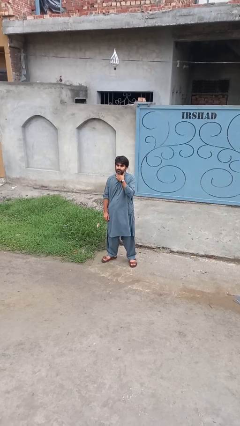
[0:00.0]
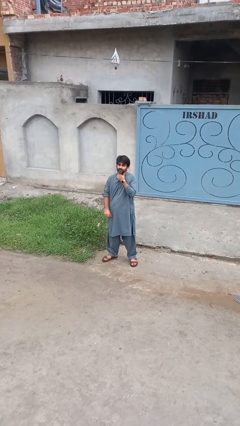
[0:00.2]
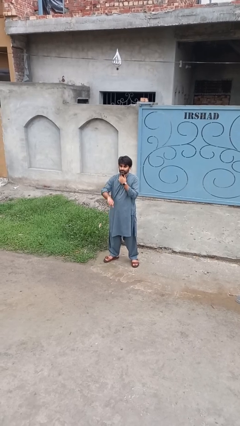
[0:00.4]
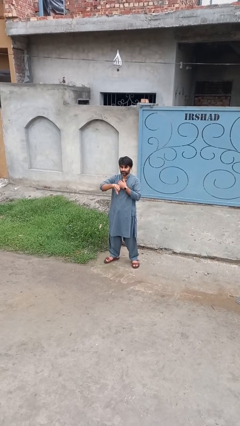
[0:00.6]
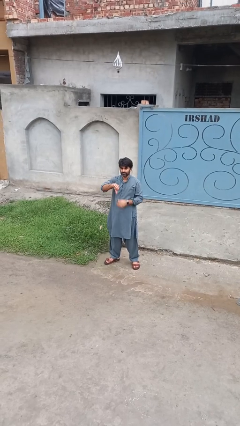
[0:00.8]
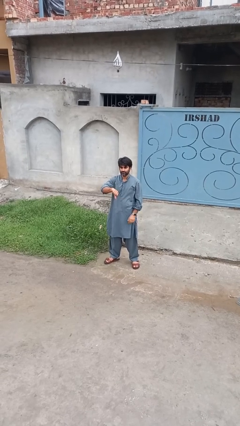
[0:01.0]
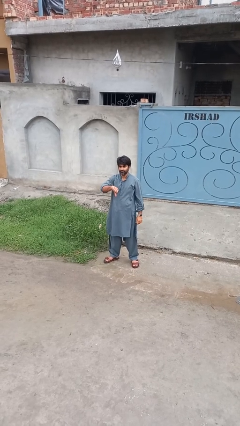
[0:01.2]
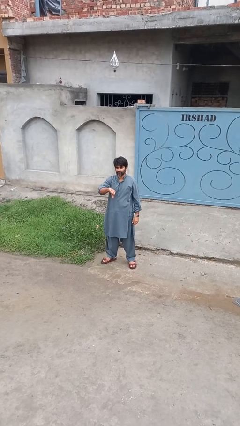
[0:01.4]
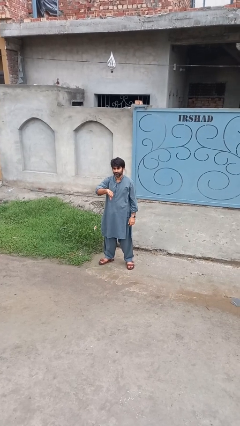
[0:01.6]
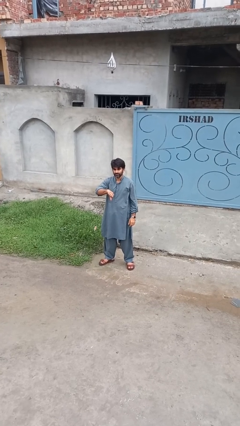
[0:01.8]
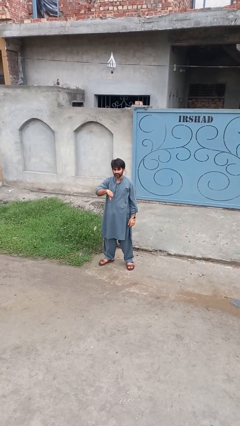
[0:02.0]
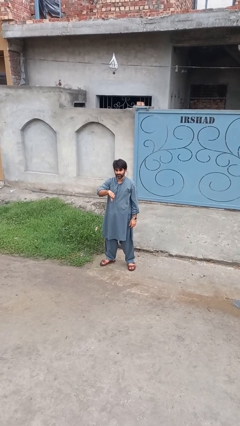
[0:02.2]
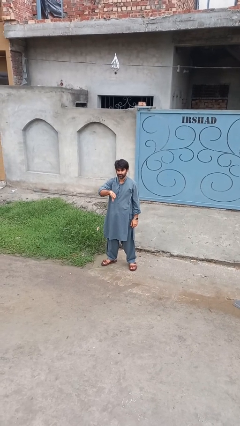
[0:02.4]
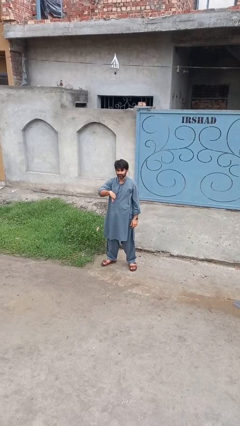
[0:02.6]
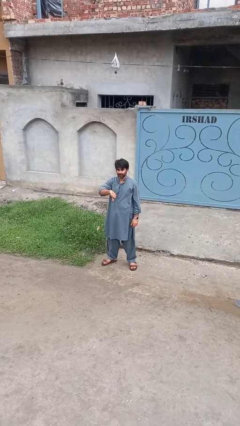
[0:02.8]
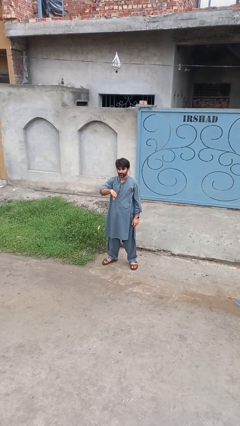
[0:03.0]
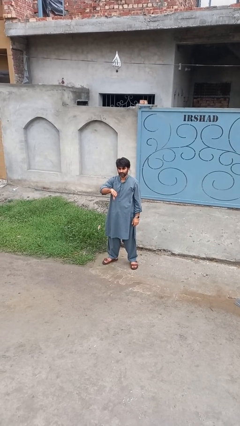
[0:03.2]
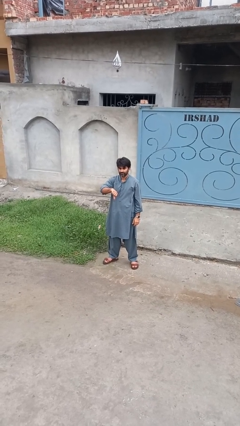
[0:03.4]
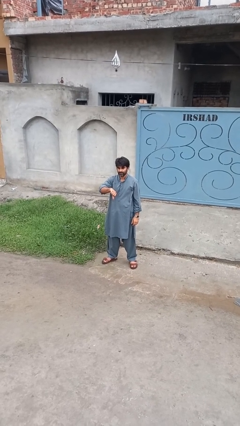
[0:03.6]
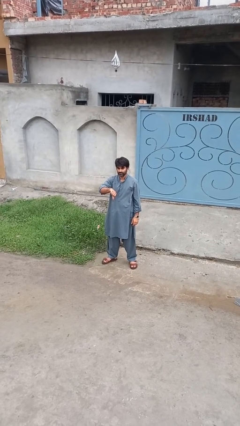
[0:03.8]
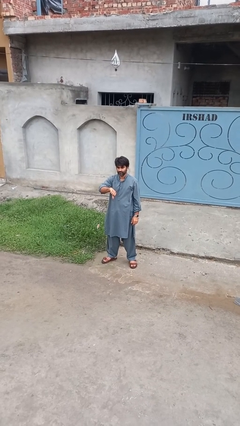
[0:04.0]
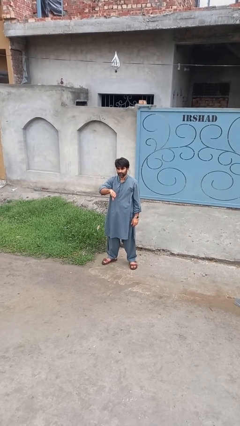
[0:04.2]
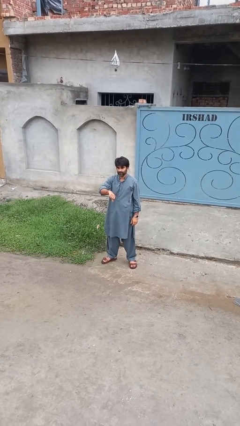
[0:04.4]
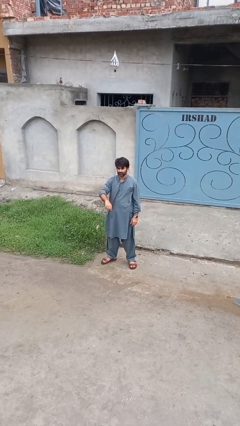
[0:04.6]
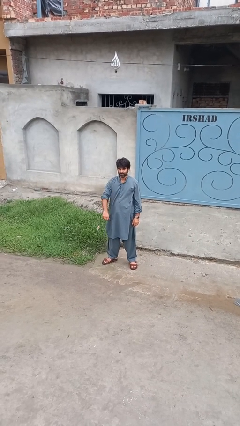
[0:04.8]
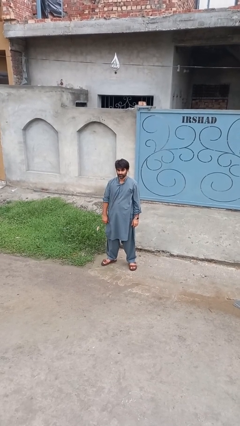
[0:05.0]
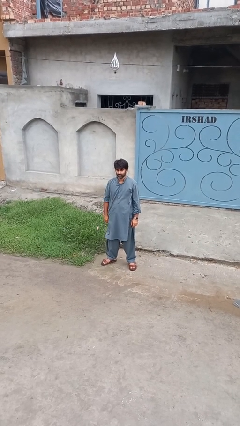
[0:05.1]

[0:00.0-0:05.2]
person gestures thumbs down

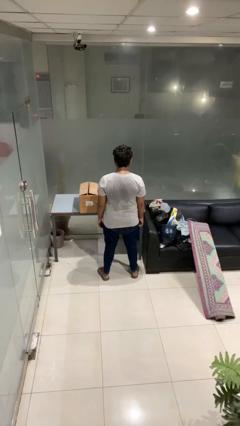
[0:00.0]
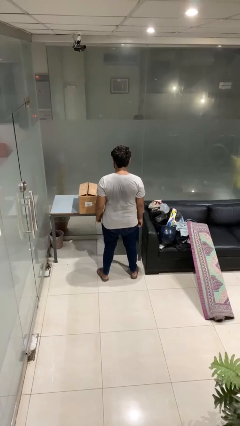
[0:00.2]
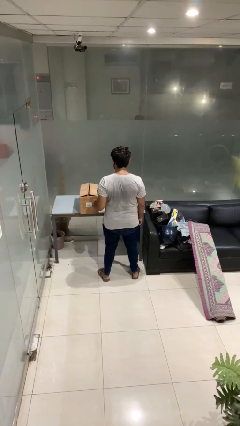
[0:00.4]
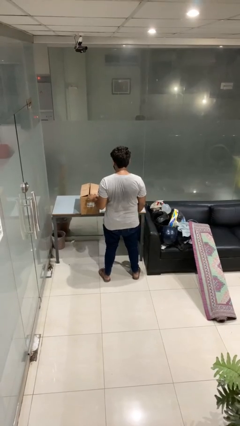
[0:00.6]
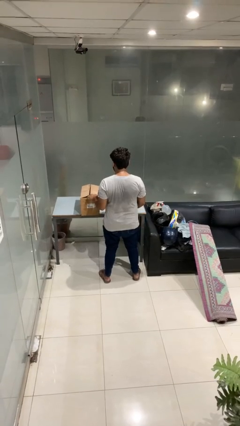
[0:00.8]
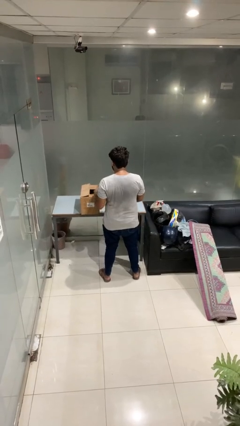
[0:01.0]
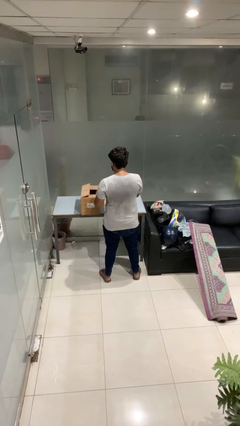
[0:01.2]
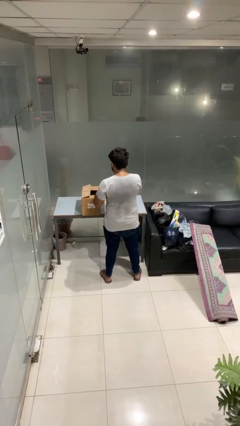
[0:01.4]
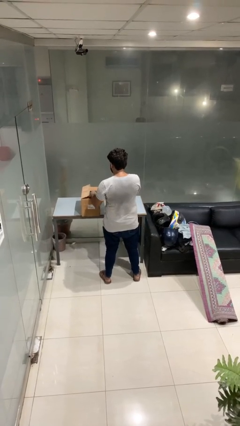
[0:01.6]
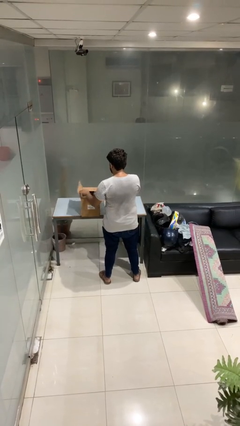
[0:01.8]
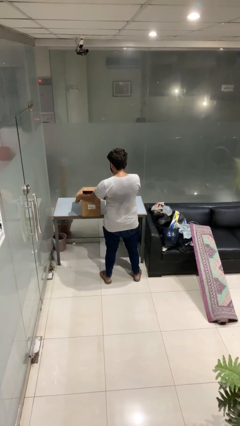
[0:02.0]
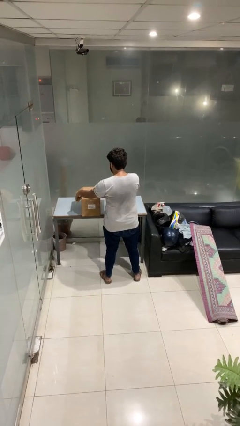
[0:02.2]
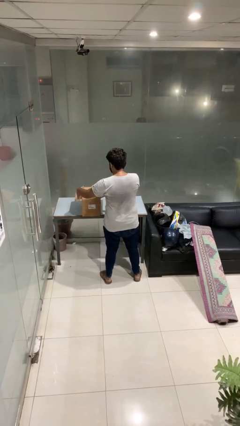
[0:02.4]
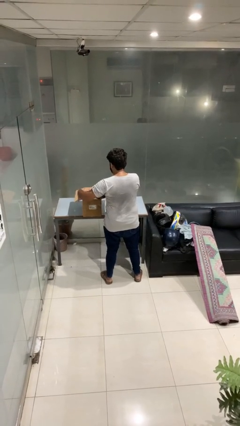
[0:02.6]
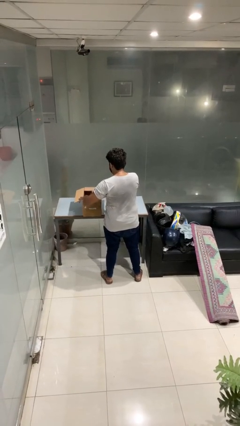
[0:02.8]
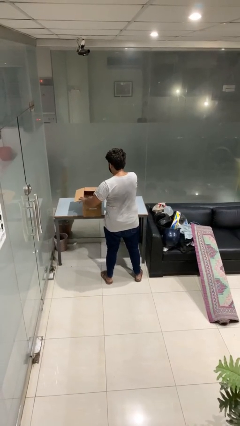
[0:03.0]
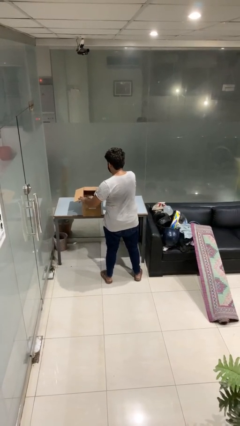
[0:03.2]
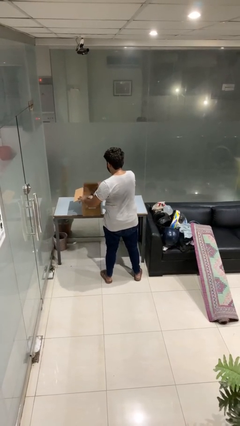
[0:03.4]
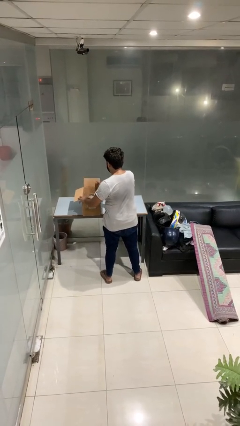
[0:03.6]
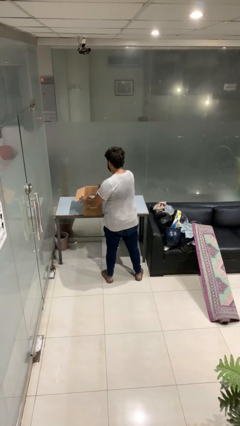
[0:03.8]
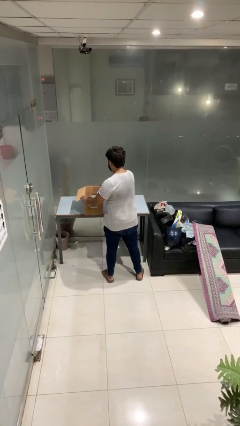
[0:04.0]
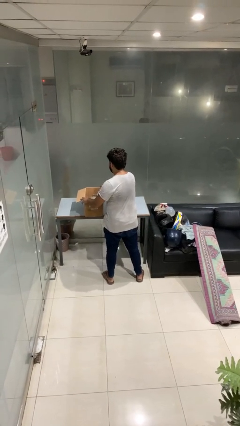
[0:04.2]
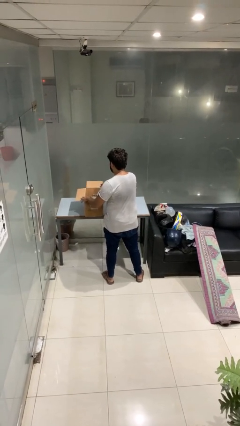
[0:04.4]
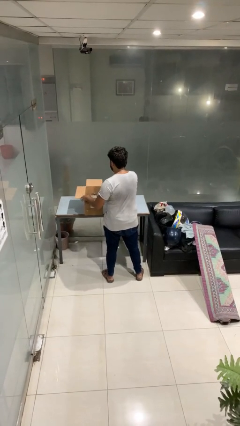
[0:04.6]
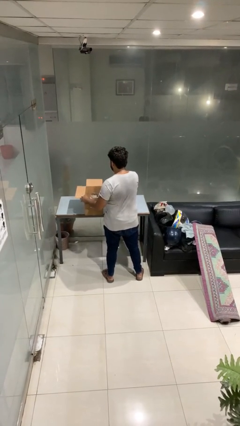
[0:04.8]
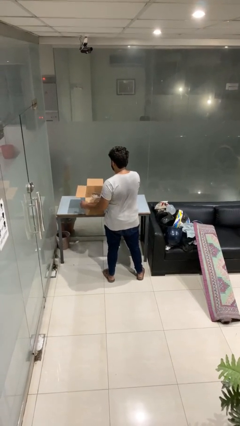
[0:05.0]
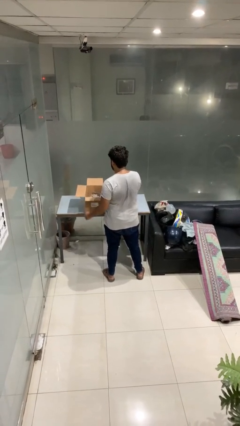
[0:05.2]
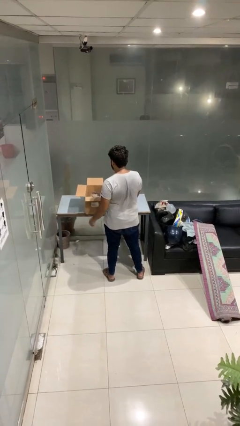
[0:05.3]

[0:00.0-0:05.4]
person opens box

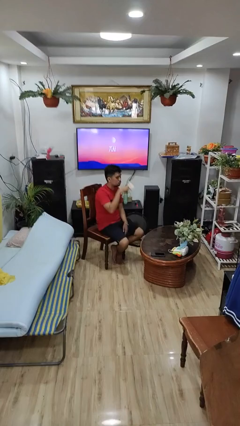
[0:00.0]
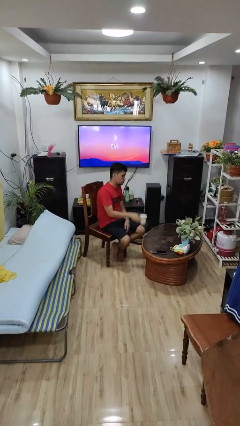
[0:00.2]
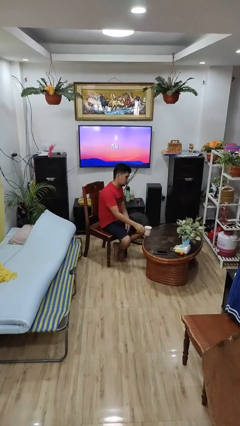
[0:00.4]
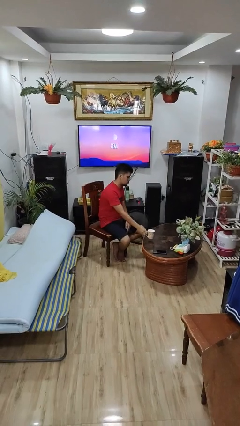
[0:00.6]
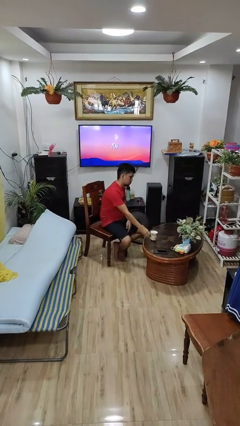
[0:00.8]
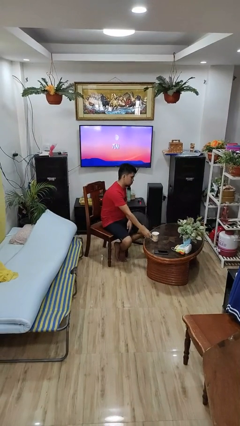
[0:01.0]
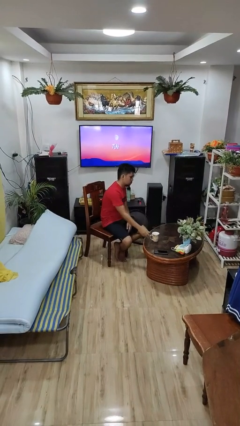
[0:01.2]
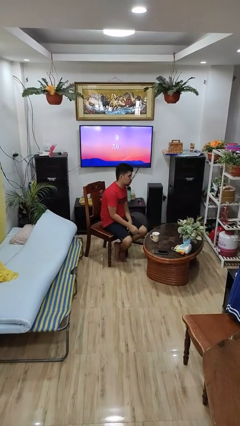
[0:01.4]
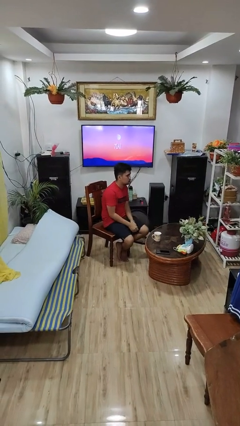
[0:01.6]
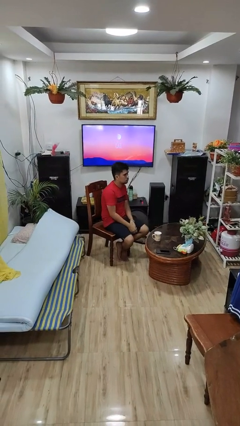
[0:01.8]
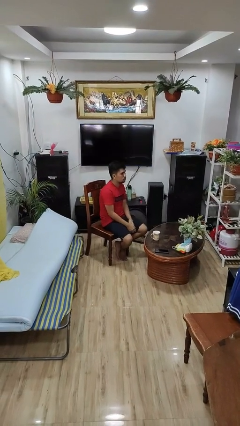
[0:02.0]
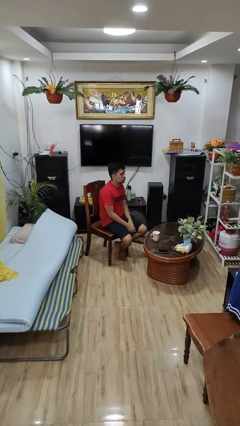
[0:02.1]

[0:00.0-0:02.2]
person puts down object on table

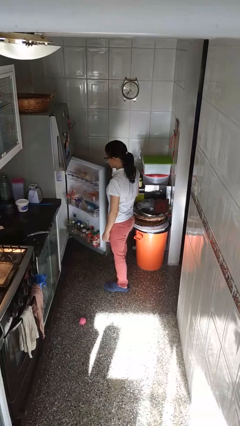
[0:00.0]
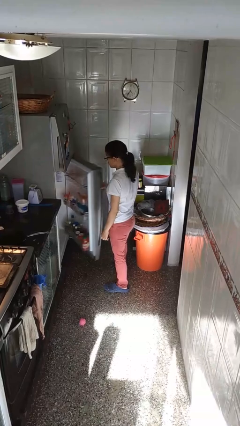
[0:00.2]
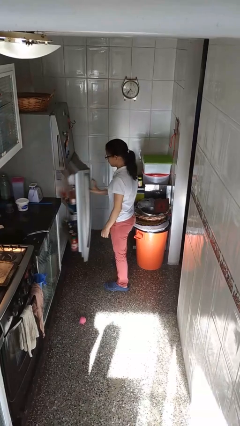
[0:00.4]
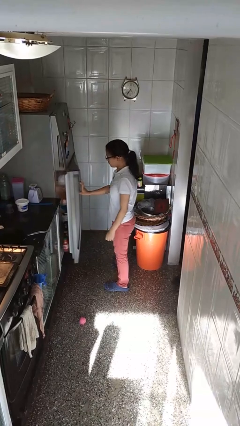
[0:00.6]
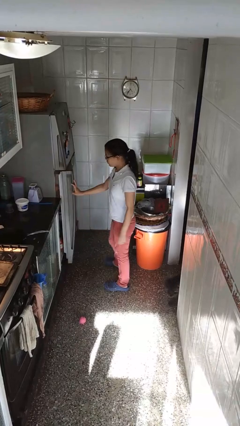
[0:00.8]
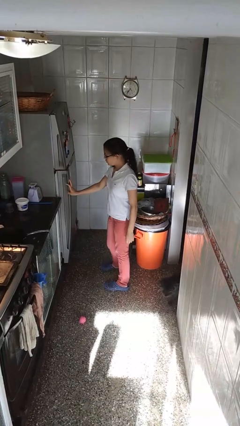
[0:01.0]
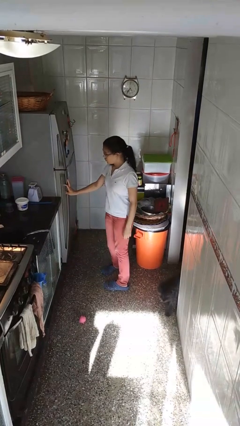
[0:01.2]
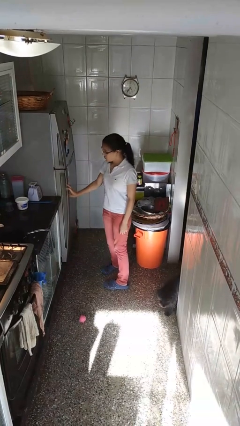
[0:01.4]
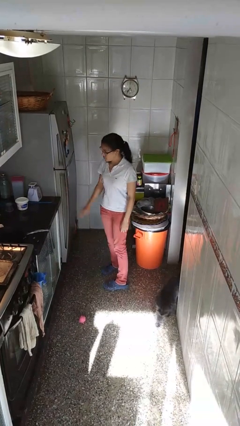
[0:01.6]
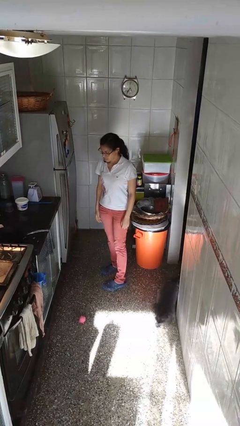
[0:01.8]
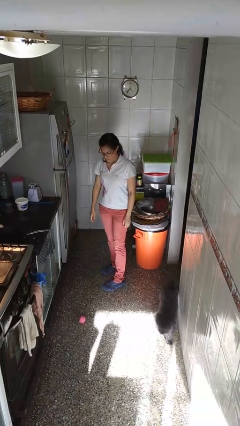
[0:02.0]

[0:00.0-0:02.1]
person closes refrigerator

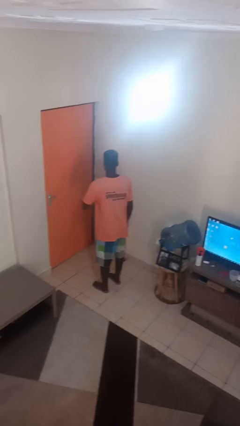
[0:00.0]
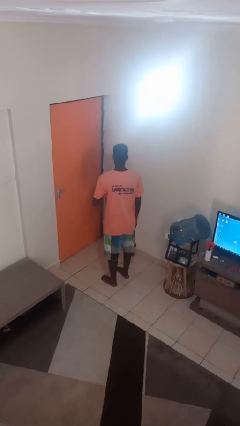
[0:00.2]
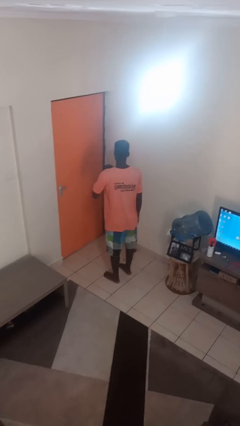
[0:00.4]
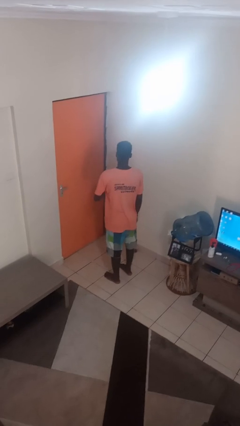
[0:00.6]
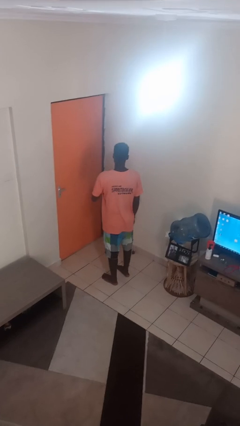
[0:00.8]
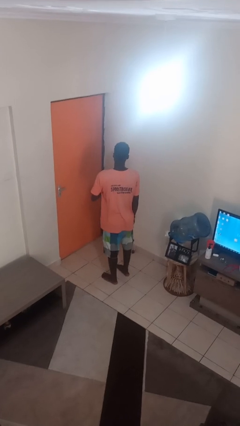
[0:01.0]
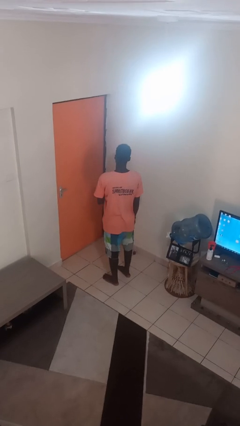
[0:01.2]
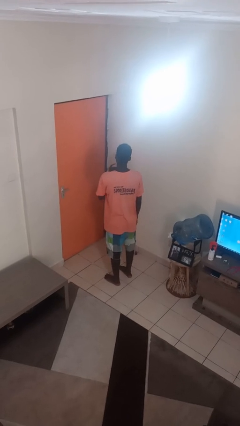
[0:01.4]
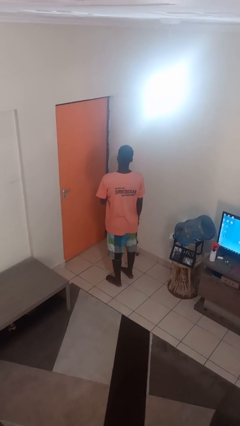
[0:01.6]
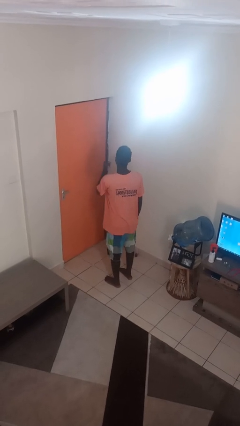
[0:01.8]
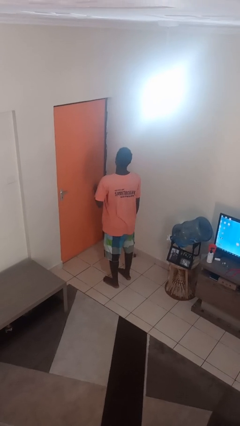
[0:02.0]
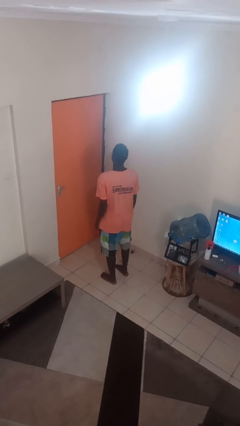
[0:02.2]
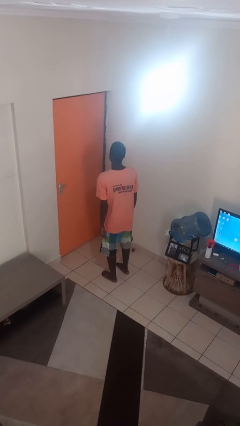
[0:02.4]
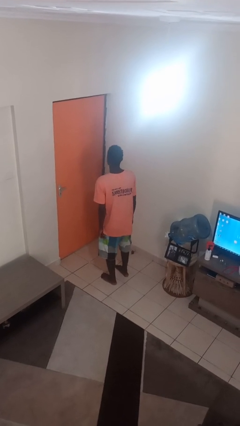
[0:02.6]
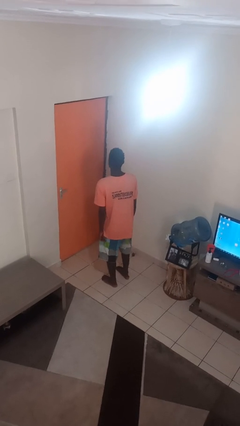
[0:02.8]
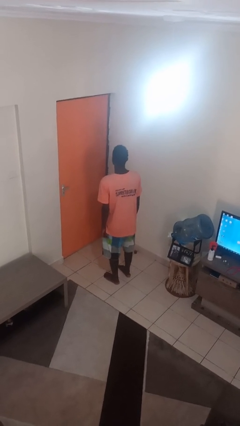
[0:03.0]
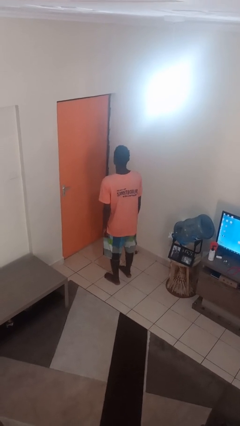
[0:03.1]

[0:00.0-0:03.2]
person snaps fingers
